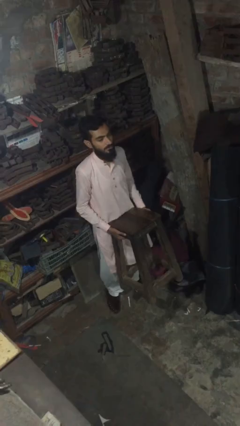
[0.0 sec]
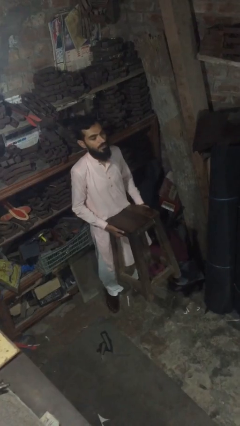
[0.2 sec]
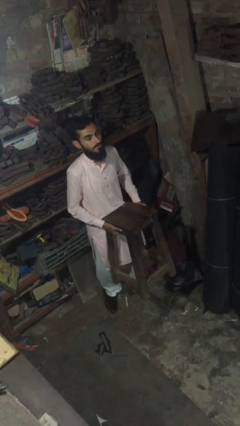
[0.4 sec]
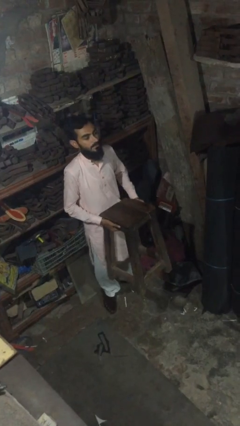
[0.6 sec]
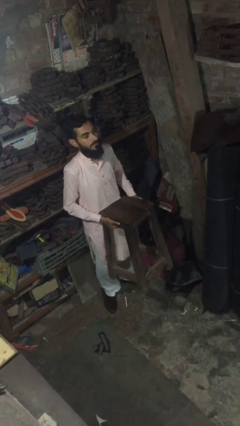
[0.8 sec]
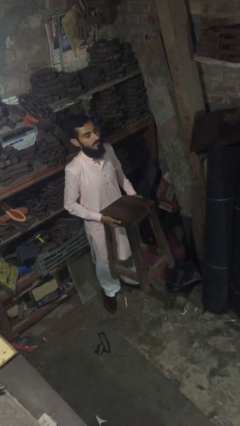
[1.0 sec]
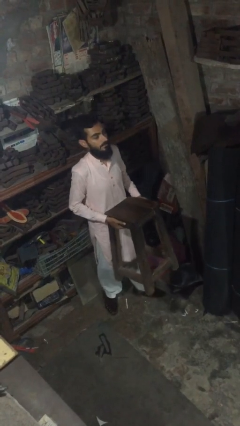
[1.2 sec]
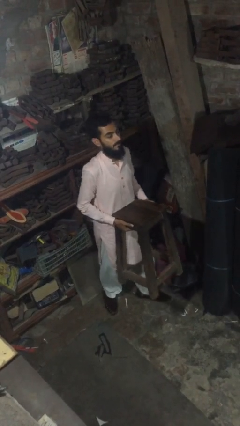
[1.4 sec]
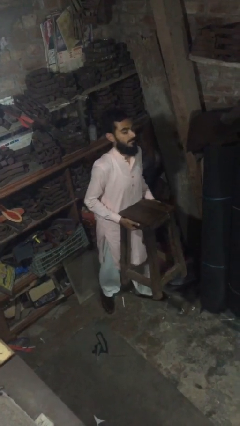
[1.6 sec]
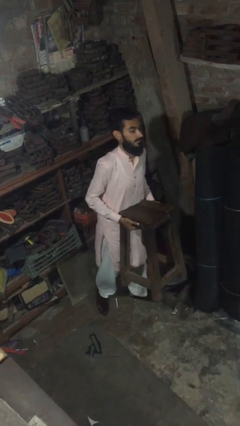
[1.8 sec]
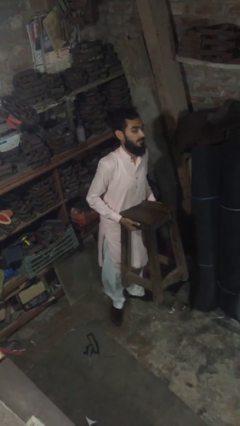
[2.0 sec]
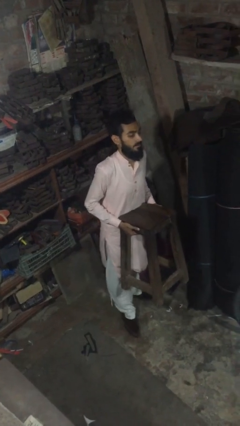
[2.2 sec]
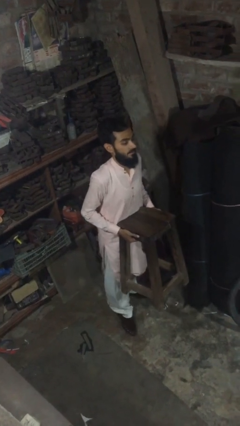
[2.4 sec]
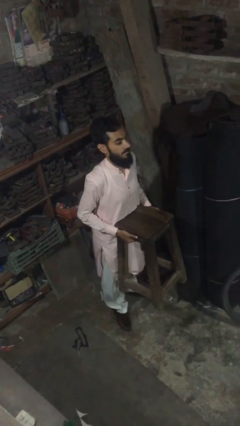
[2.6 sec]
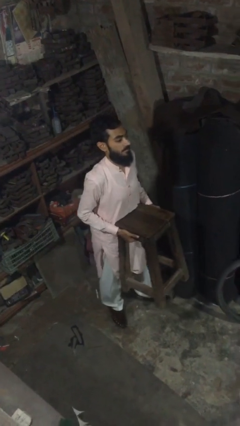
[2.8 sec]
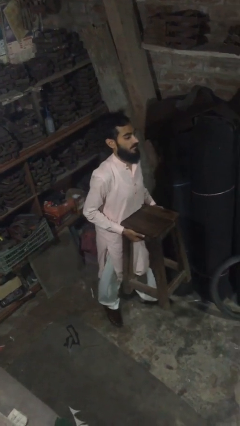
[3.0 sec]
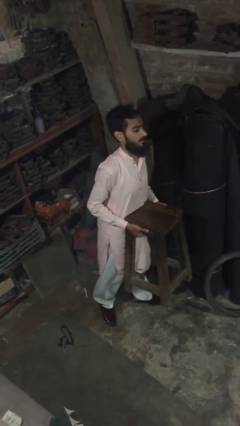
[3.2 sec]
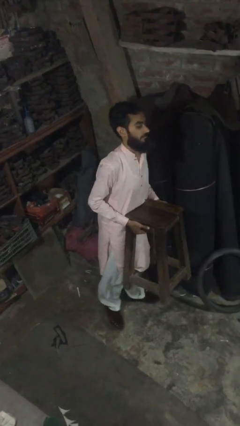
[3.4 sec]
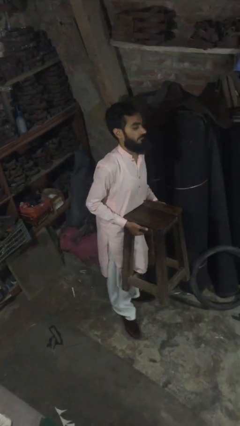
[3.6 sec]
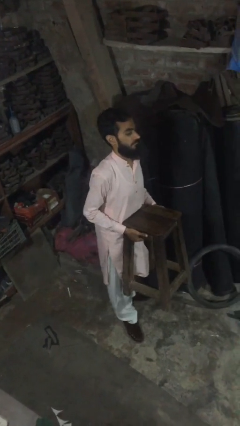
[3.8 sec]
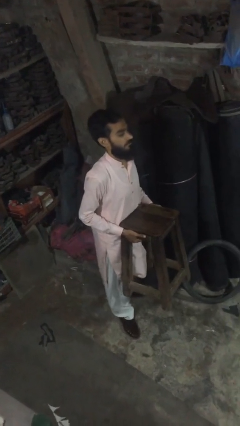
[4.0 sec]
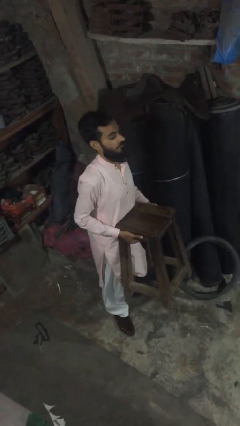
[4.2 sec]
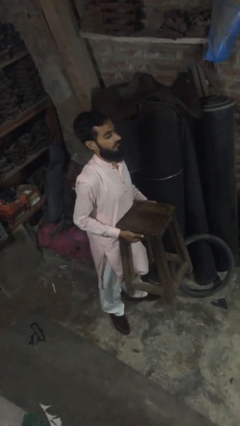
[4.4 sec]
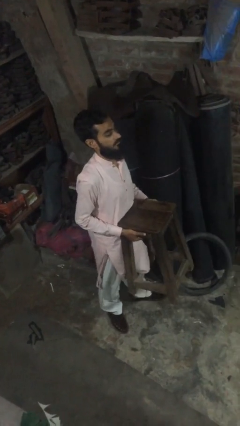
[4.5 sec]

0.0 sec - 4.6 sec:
person carries heavy object

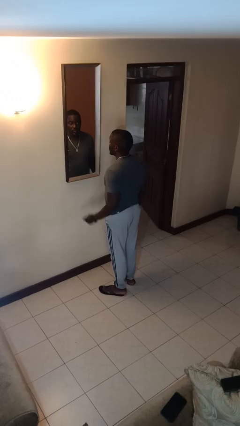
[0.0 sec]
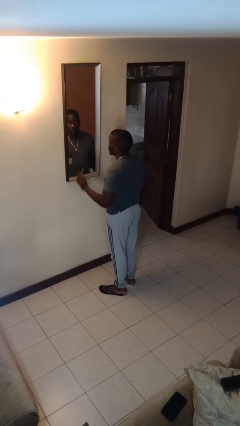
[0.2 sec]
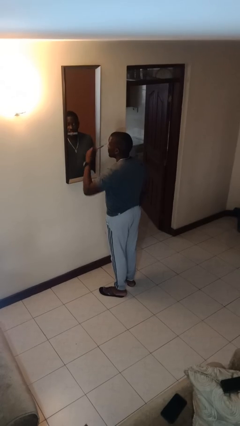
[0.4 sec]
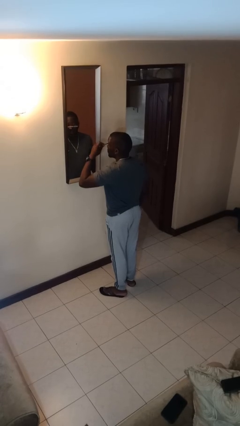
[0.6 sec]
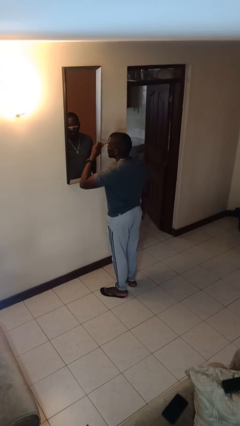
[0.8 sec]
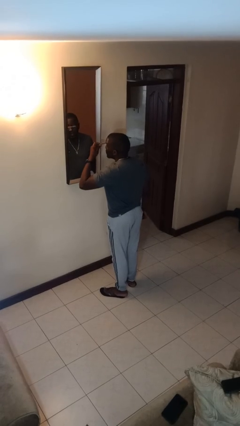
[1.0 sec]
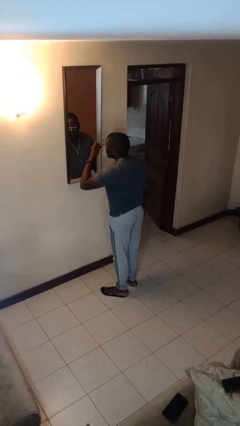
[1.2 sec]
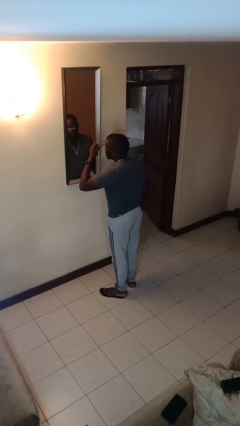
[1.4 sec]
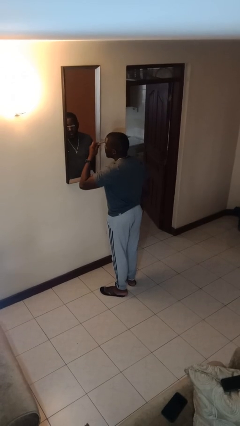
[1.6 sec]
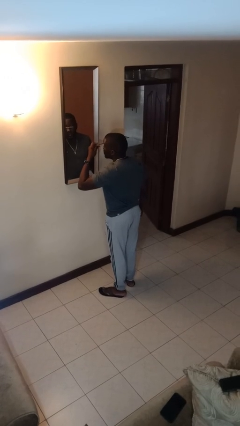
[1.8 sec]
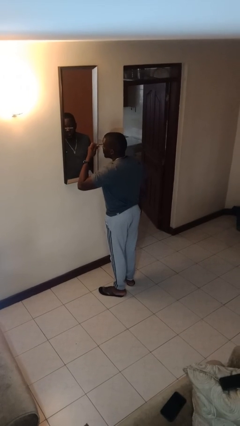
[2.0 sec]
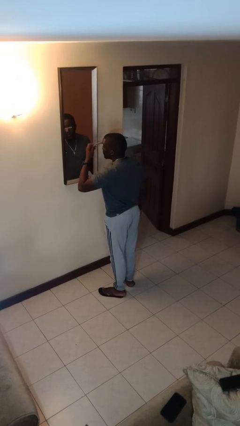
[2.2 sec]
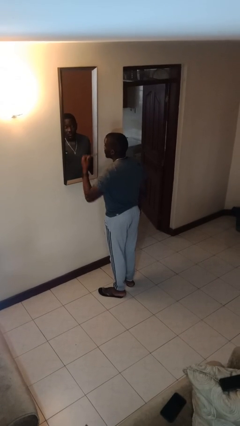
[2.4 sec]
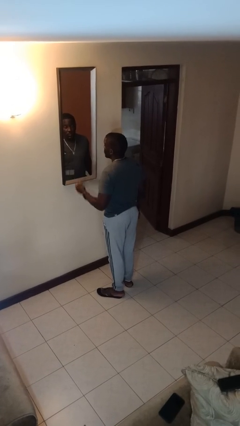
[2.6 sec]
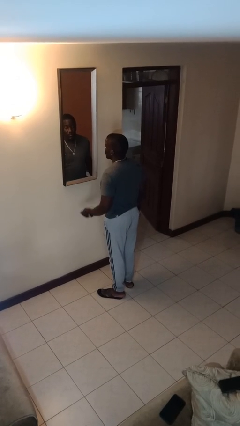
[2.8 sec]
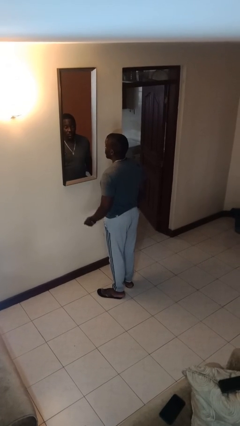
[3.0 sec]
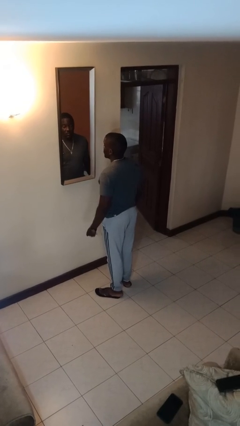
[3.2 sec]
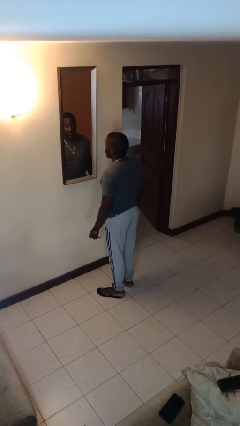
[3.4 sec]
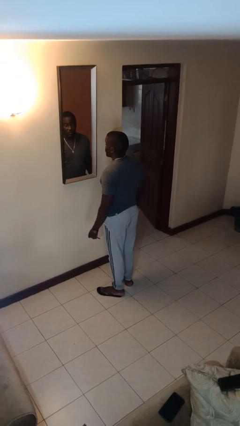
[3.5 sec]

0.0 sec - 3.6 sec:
person applies eye makeup

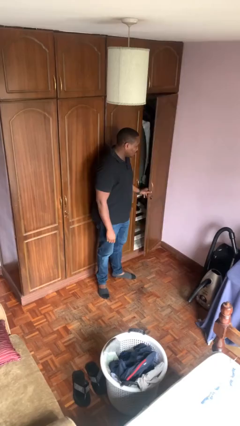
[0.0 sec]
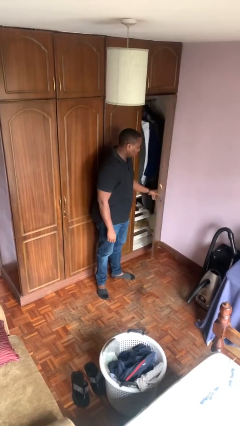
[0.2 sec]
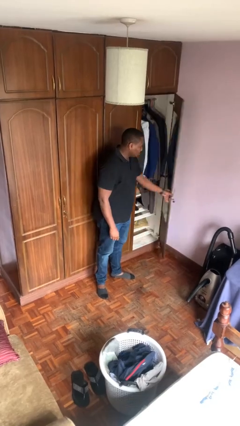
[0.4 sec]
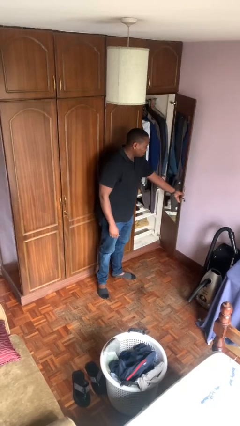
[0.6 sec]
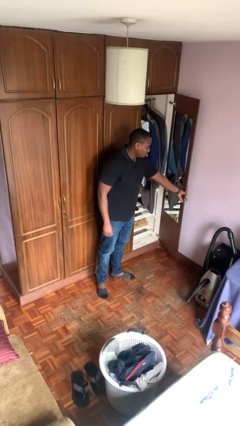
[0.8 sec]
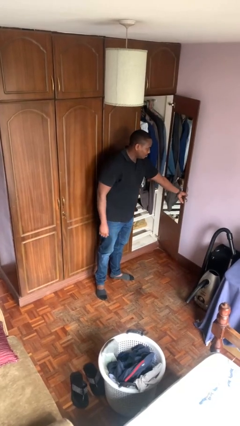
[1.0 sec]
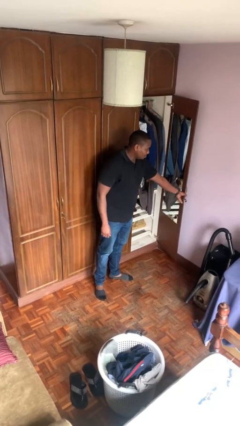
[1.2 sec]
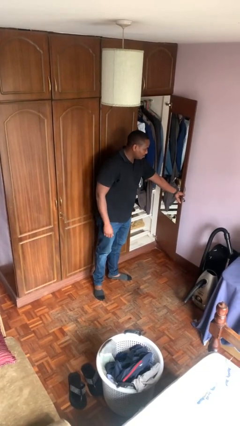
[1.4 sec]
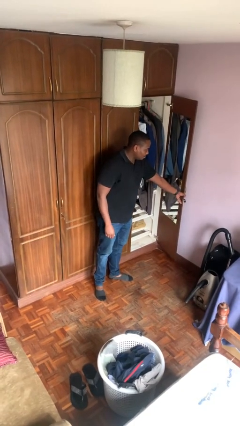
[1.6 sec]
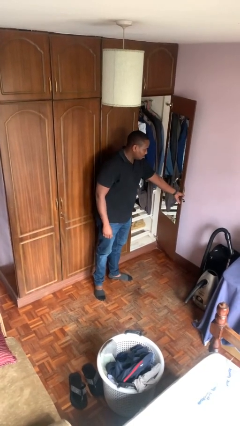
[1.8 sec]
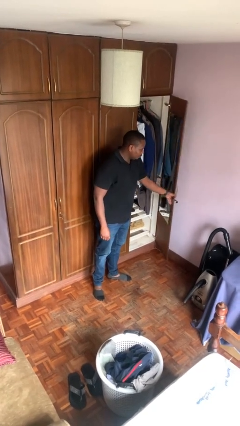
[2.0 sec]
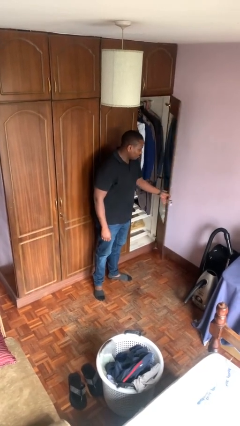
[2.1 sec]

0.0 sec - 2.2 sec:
person opens closet door

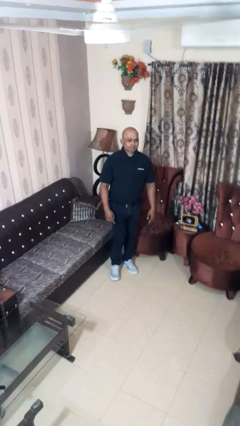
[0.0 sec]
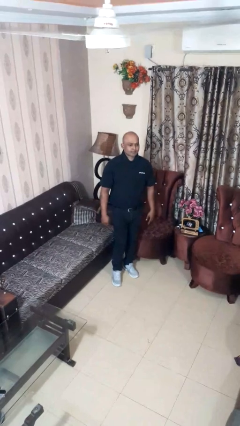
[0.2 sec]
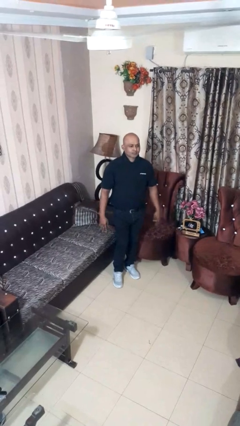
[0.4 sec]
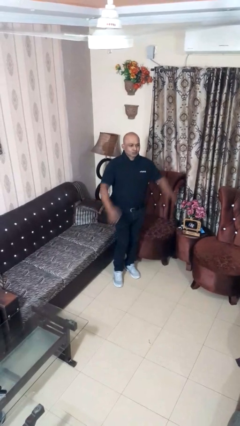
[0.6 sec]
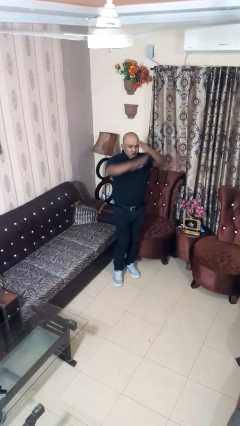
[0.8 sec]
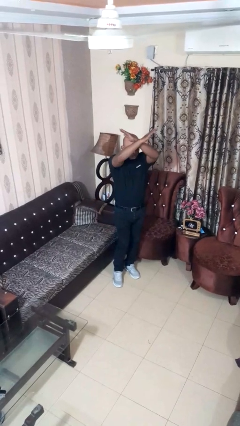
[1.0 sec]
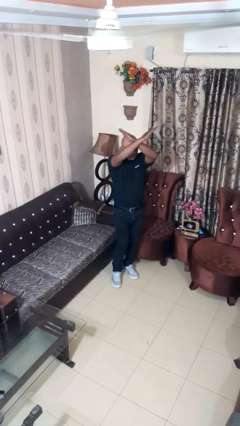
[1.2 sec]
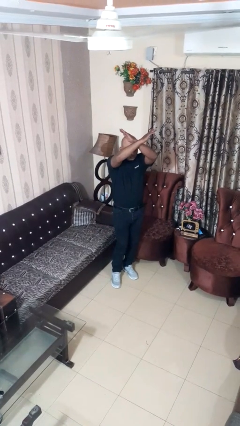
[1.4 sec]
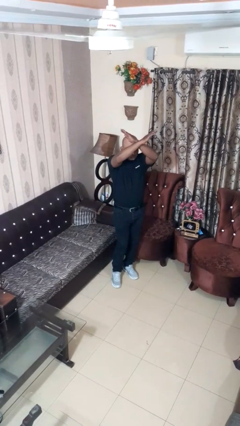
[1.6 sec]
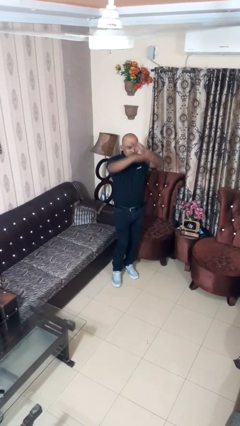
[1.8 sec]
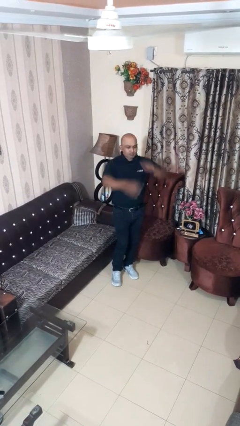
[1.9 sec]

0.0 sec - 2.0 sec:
person gestures arms x

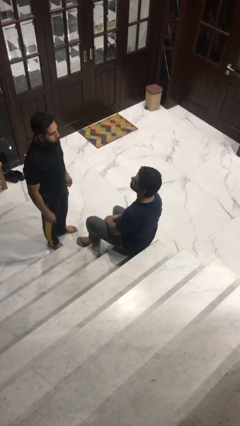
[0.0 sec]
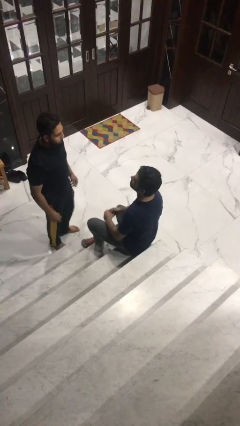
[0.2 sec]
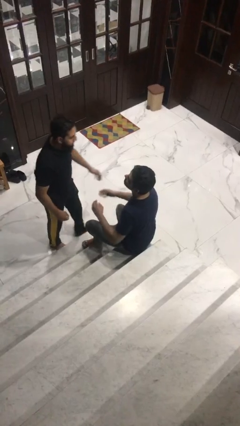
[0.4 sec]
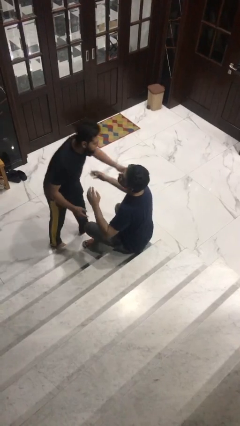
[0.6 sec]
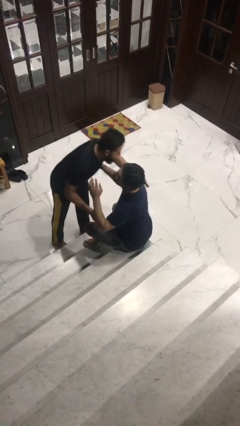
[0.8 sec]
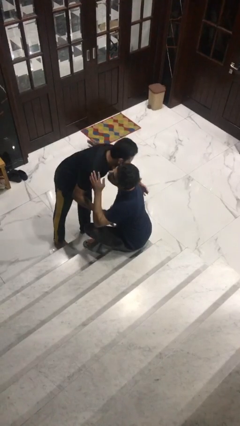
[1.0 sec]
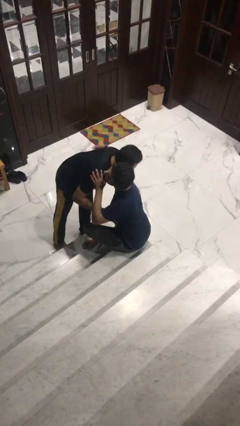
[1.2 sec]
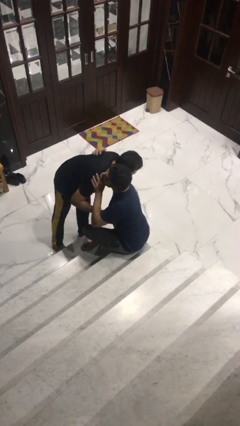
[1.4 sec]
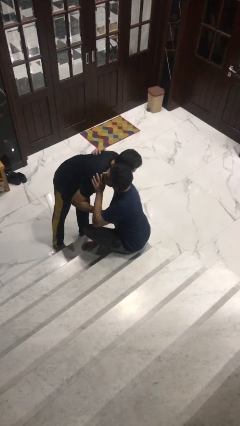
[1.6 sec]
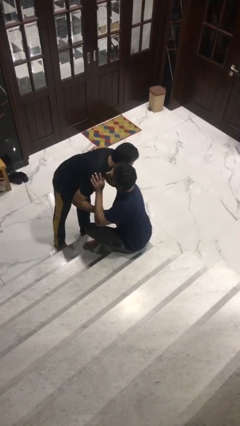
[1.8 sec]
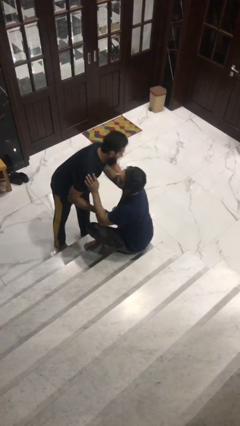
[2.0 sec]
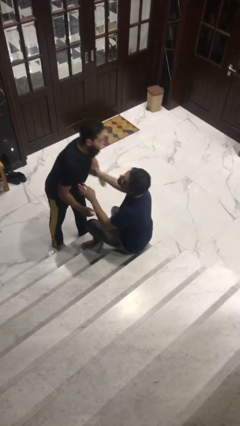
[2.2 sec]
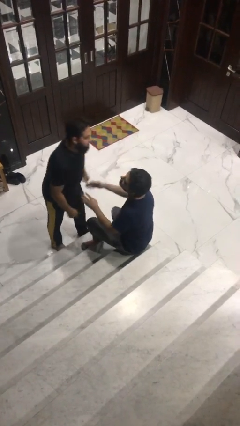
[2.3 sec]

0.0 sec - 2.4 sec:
person embraces person

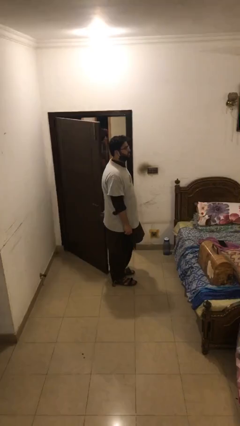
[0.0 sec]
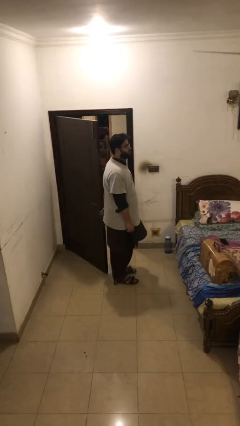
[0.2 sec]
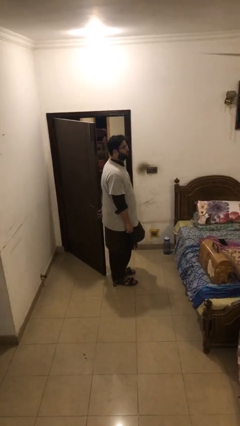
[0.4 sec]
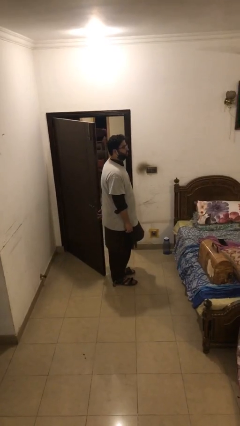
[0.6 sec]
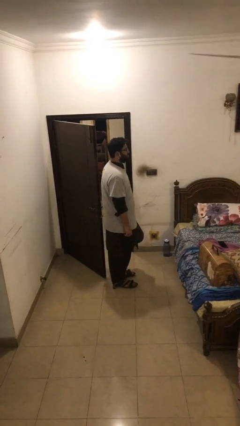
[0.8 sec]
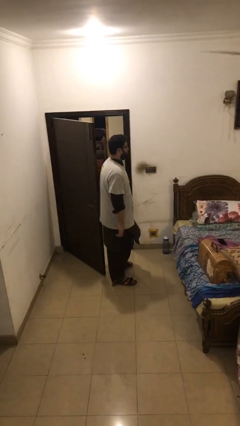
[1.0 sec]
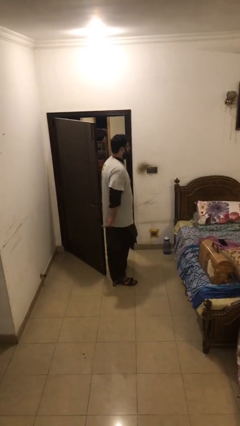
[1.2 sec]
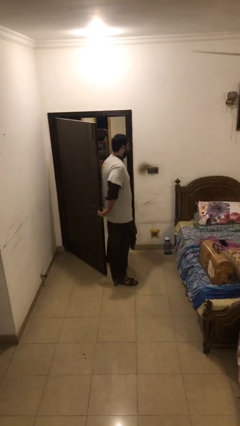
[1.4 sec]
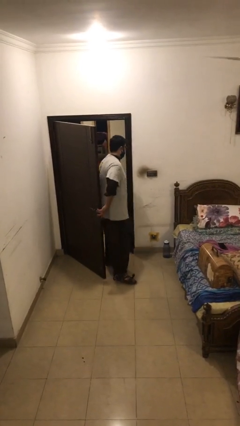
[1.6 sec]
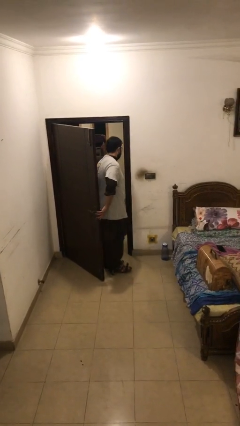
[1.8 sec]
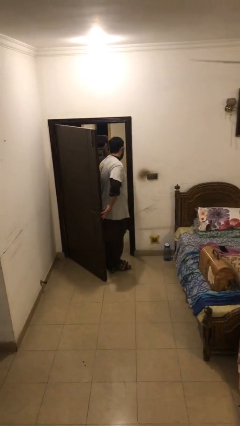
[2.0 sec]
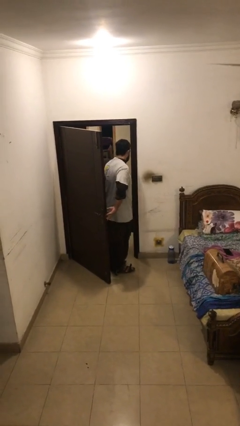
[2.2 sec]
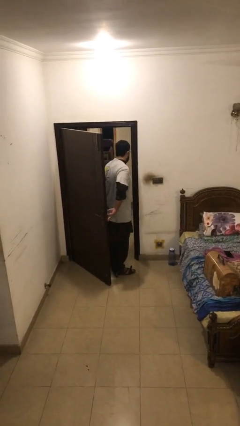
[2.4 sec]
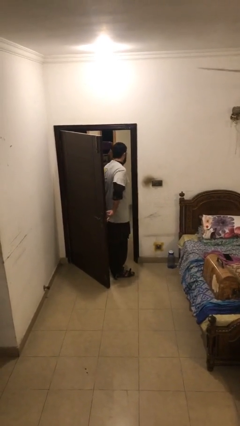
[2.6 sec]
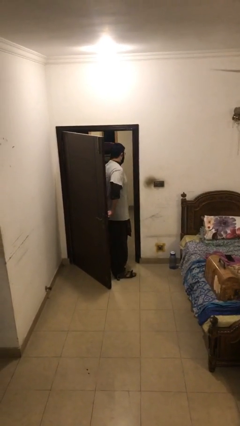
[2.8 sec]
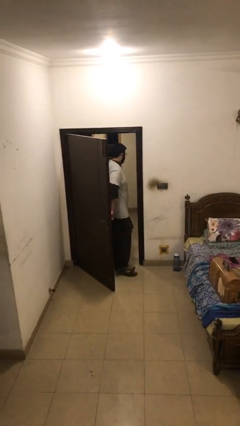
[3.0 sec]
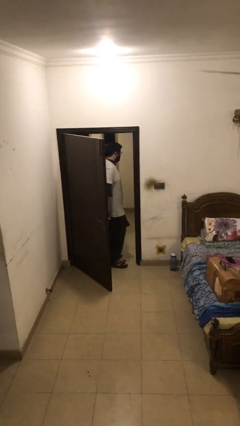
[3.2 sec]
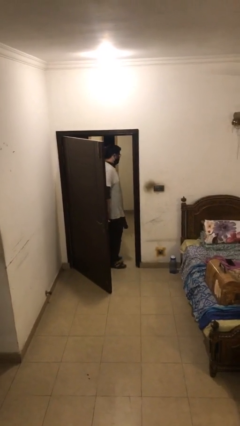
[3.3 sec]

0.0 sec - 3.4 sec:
person exits scene through structure
